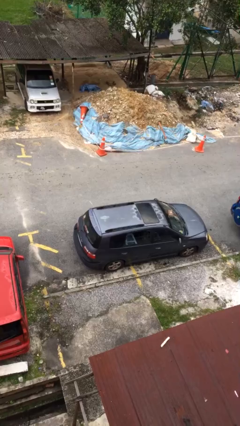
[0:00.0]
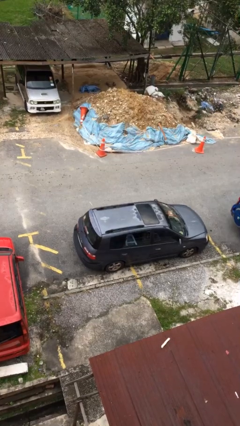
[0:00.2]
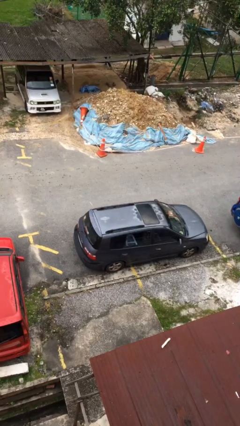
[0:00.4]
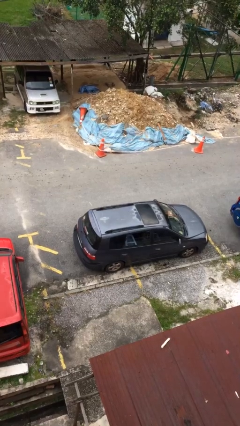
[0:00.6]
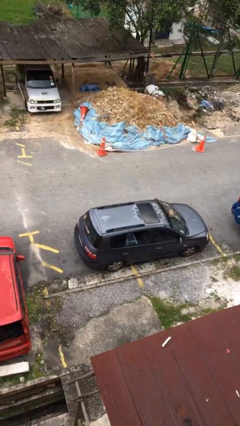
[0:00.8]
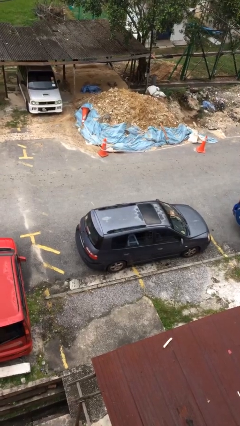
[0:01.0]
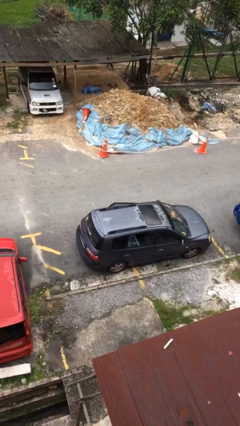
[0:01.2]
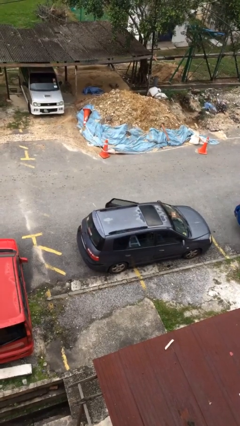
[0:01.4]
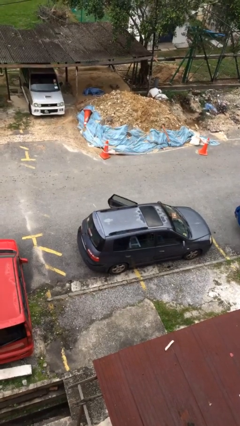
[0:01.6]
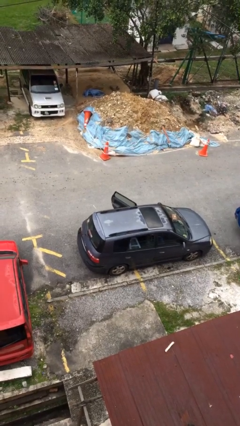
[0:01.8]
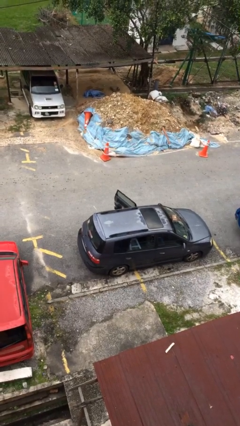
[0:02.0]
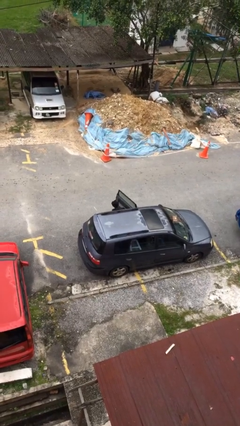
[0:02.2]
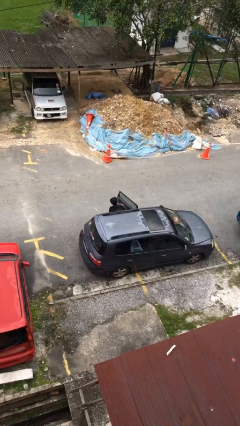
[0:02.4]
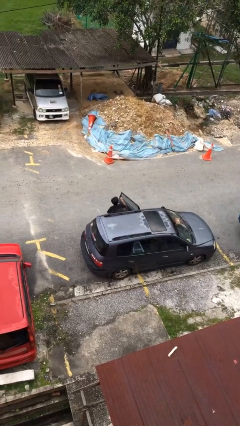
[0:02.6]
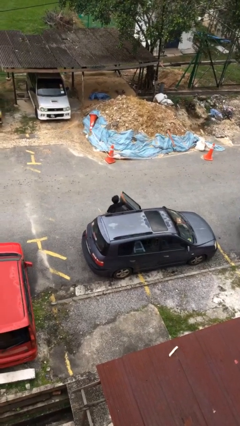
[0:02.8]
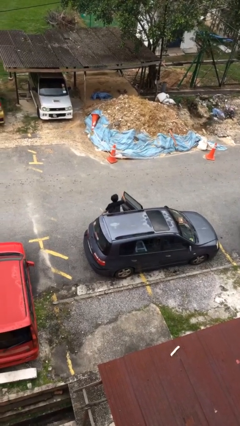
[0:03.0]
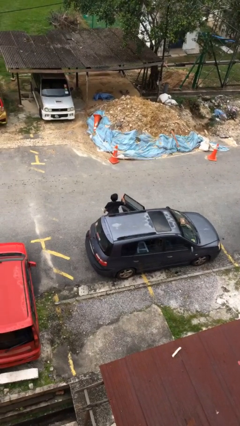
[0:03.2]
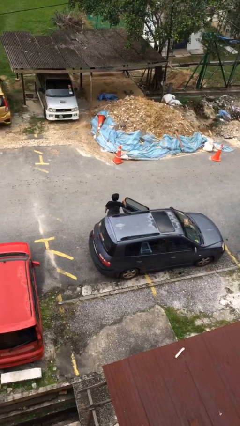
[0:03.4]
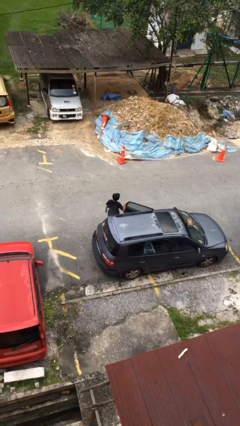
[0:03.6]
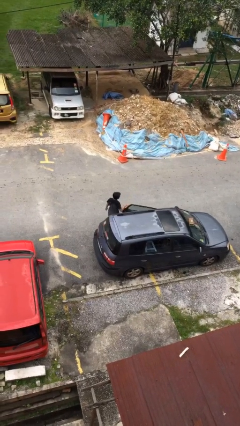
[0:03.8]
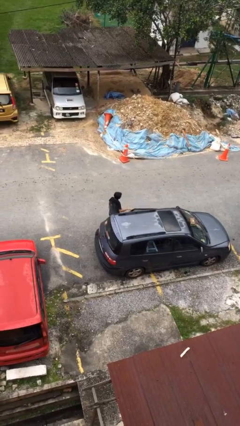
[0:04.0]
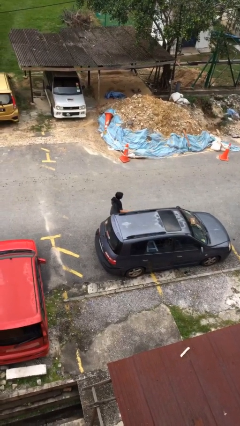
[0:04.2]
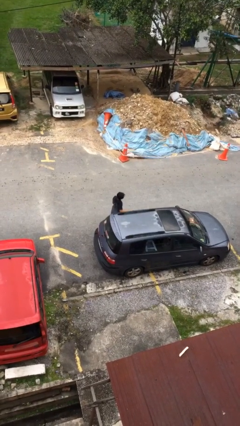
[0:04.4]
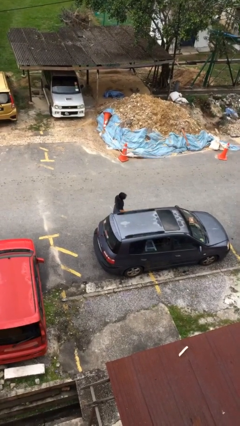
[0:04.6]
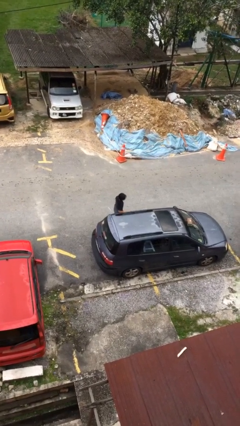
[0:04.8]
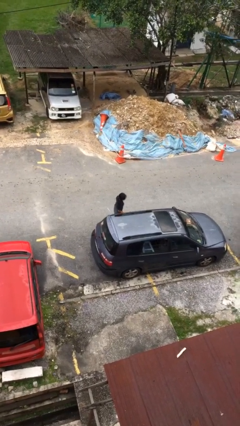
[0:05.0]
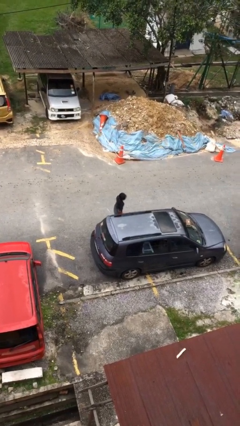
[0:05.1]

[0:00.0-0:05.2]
person exits car

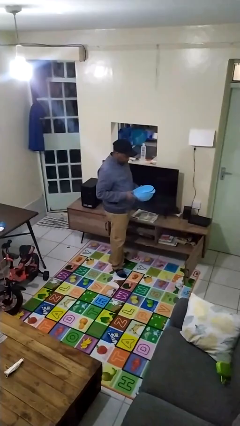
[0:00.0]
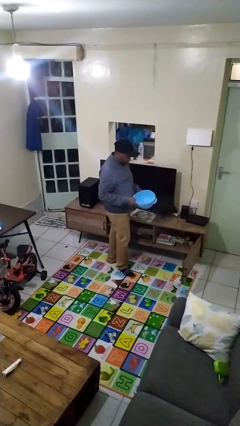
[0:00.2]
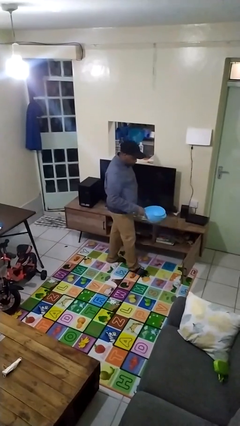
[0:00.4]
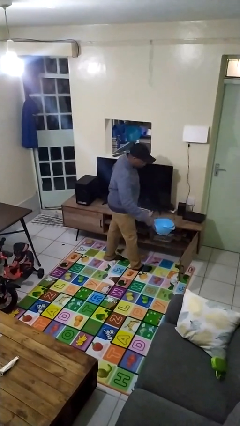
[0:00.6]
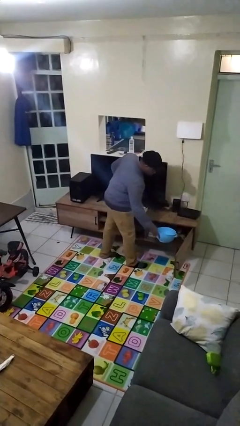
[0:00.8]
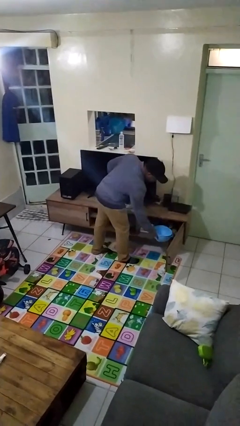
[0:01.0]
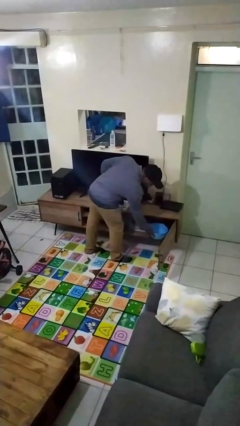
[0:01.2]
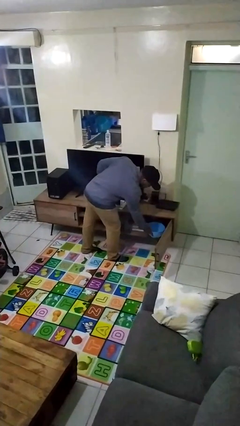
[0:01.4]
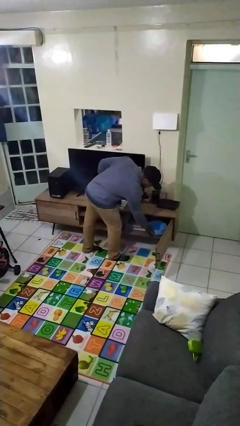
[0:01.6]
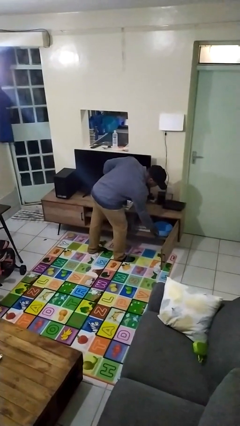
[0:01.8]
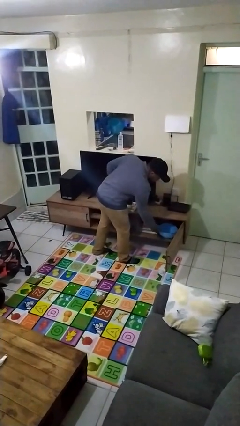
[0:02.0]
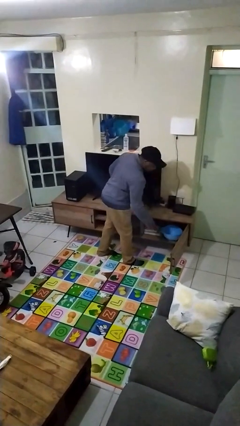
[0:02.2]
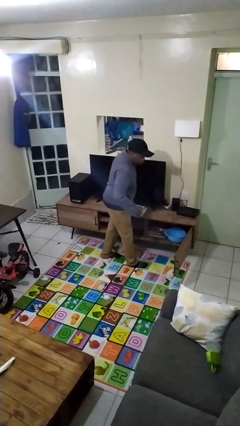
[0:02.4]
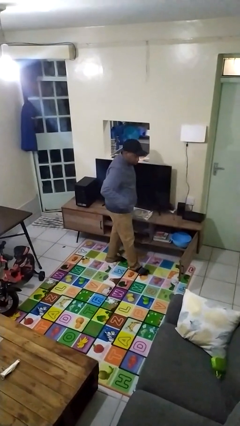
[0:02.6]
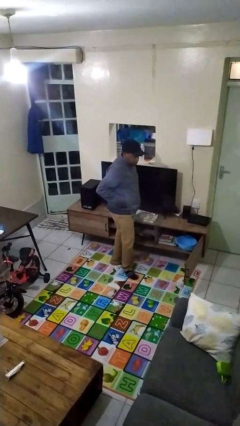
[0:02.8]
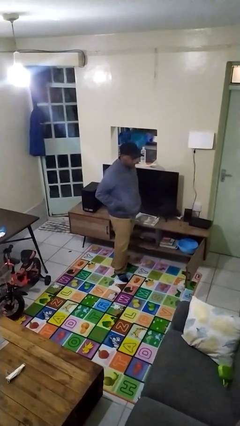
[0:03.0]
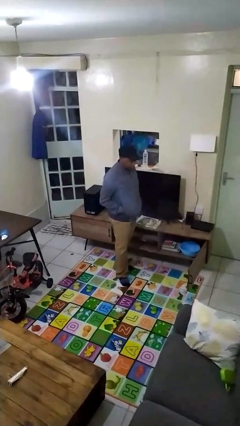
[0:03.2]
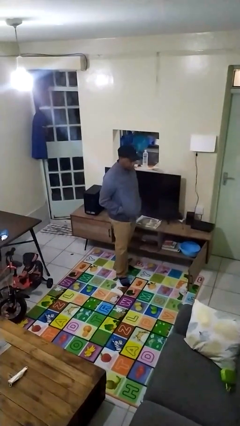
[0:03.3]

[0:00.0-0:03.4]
person puts down object into cabinet

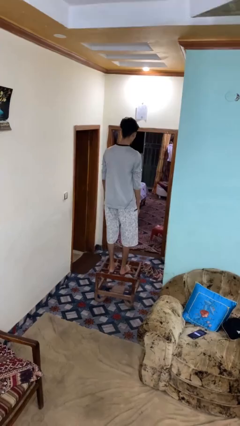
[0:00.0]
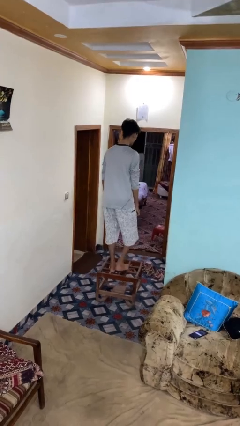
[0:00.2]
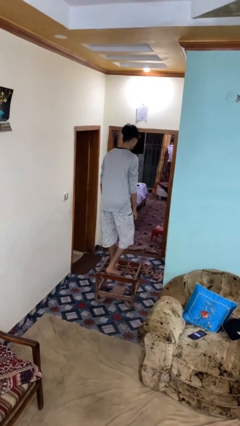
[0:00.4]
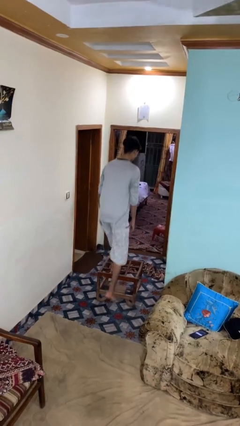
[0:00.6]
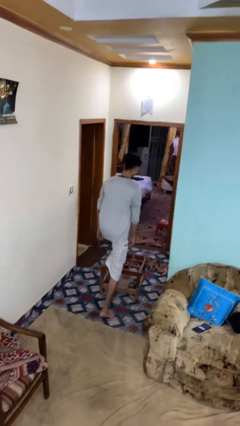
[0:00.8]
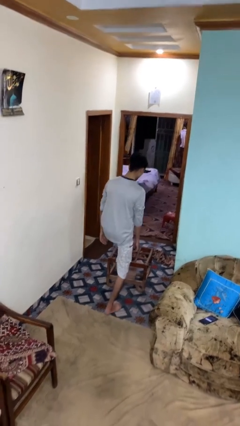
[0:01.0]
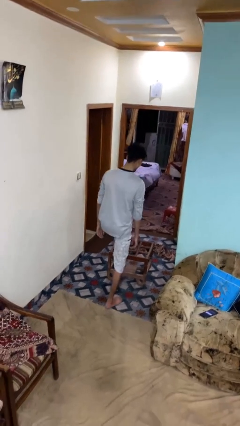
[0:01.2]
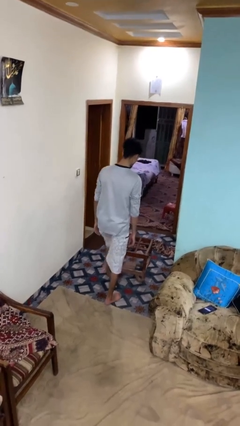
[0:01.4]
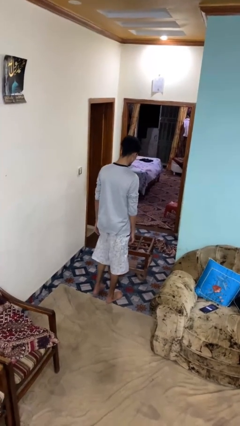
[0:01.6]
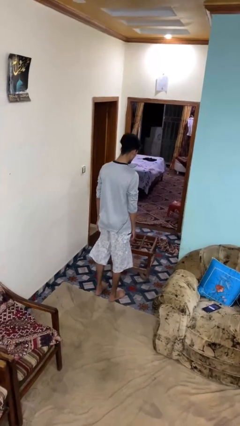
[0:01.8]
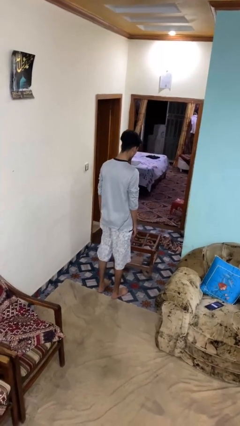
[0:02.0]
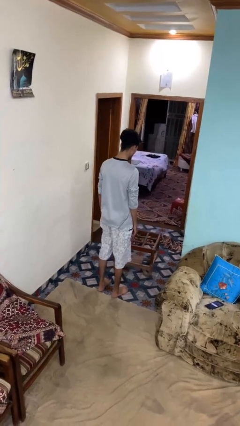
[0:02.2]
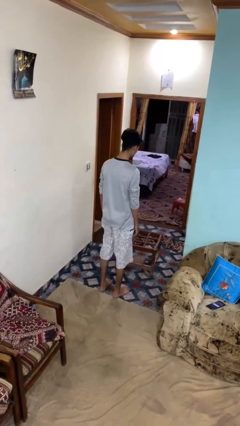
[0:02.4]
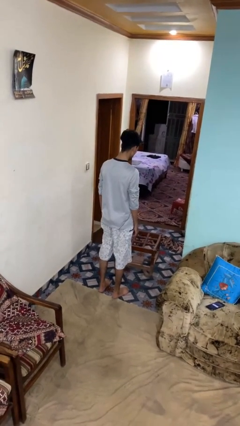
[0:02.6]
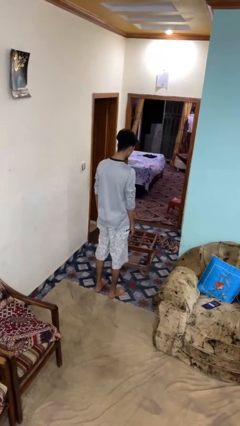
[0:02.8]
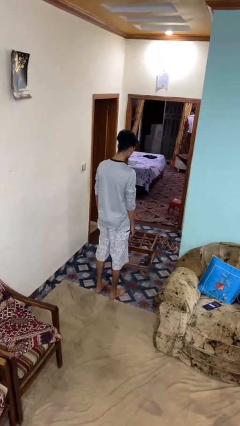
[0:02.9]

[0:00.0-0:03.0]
person climbs off table

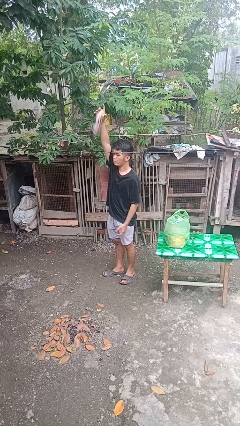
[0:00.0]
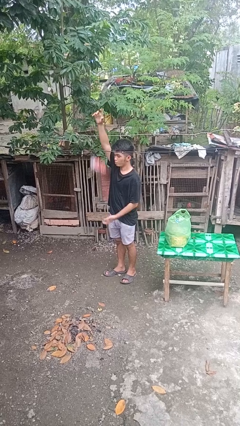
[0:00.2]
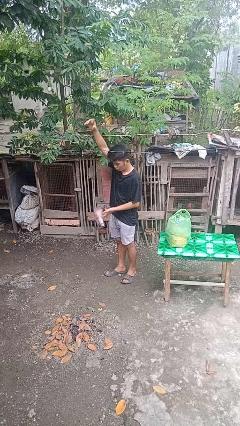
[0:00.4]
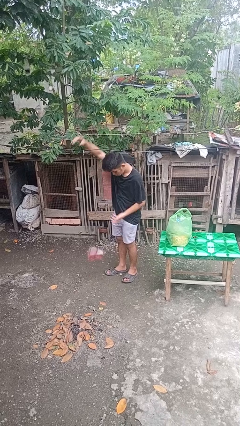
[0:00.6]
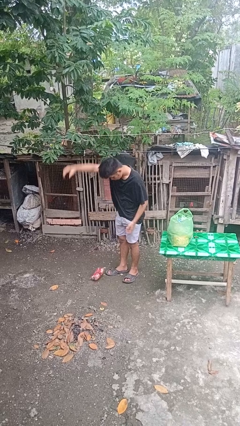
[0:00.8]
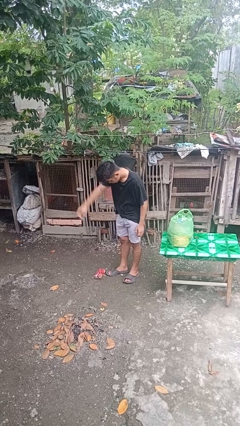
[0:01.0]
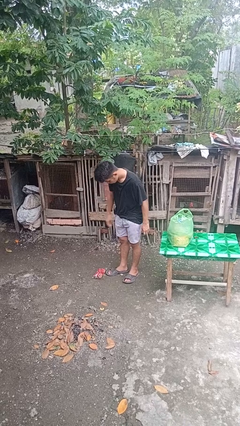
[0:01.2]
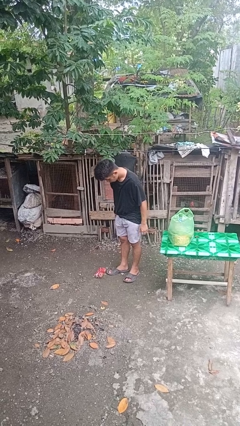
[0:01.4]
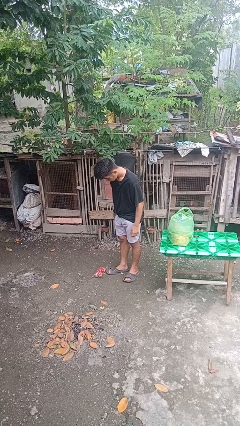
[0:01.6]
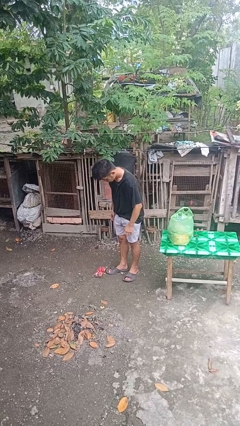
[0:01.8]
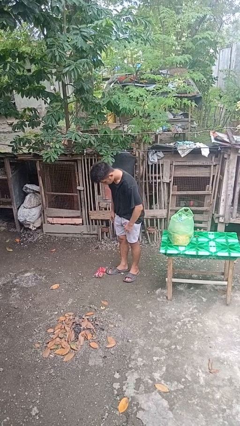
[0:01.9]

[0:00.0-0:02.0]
person drops object

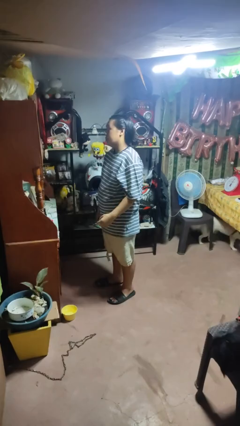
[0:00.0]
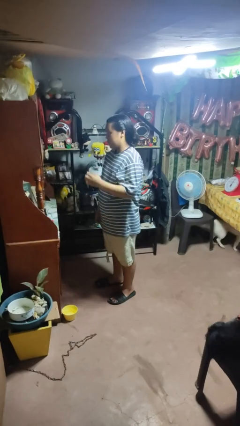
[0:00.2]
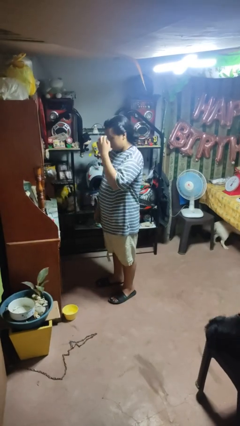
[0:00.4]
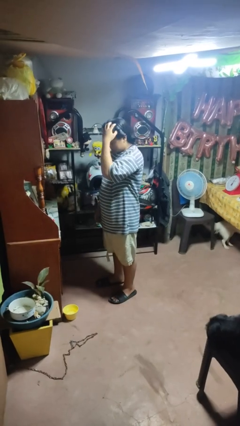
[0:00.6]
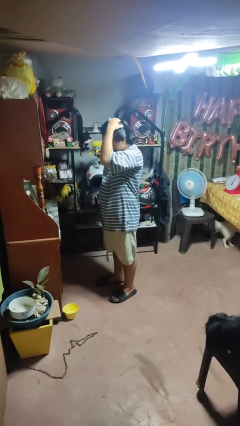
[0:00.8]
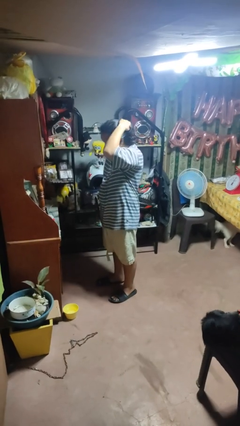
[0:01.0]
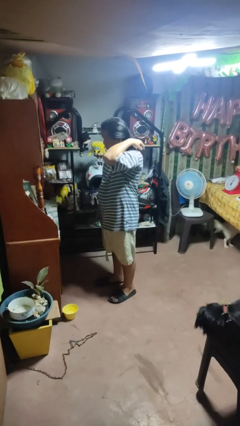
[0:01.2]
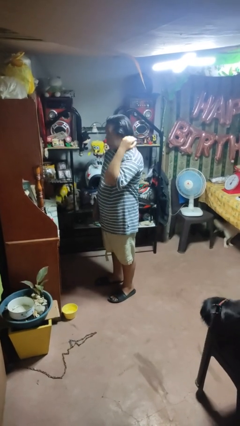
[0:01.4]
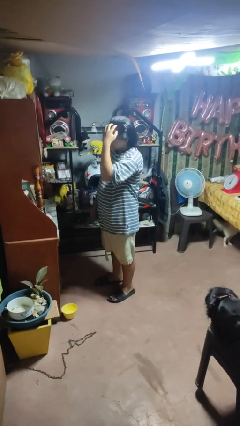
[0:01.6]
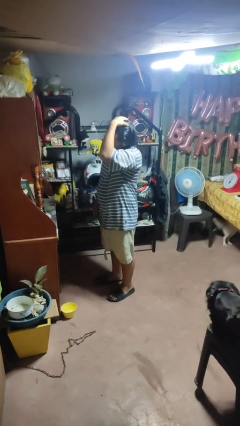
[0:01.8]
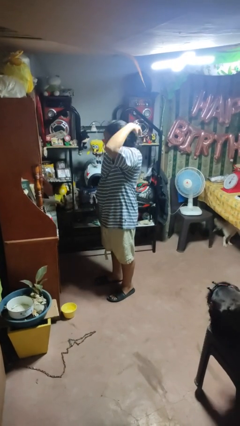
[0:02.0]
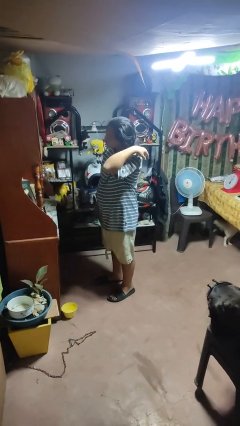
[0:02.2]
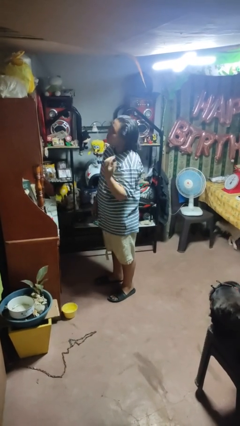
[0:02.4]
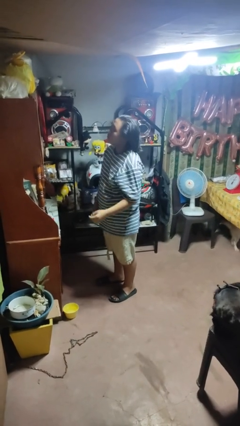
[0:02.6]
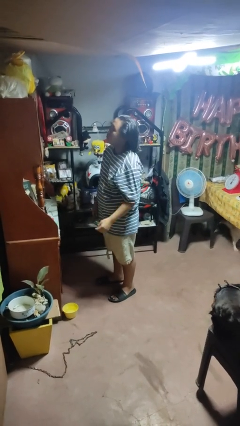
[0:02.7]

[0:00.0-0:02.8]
person strokes hair

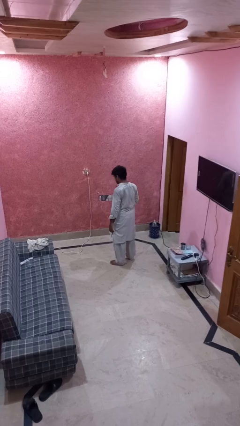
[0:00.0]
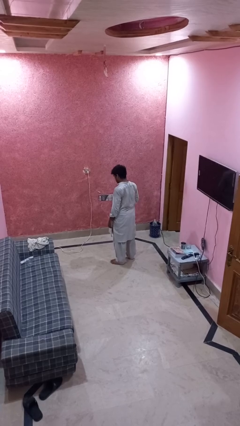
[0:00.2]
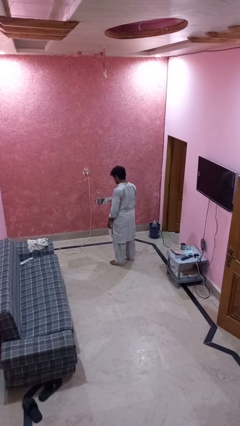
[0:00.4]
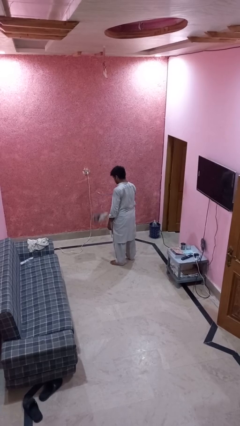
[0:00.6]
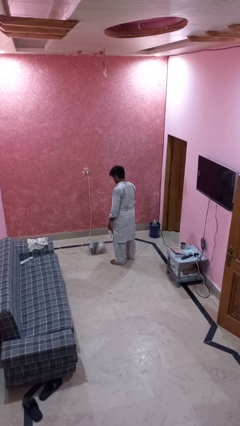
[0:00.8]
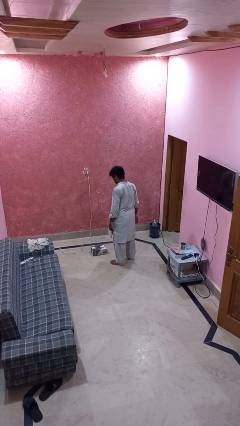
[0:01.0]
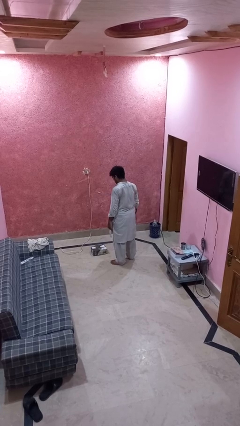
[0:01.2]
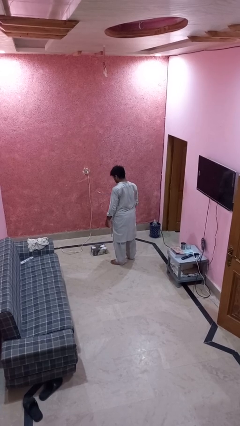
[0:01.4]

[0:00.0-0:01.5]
person throws object to ground
